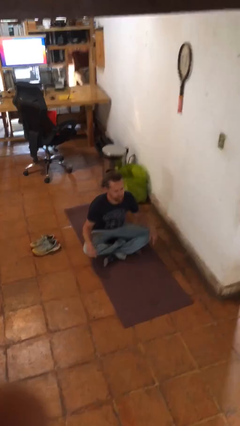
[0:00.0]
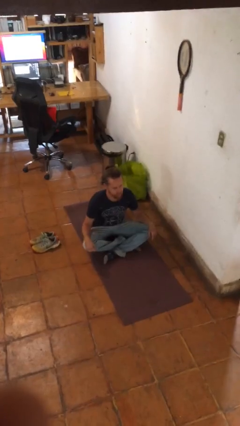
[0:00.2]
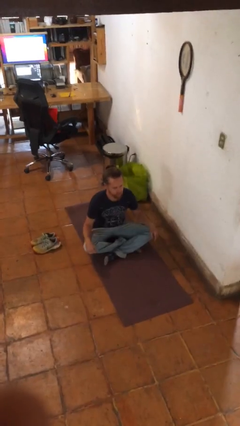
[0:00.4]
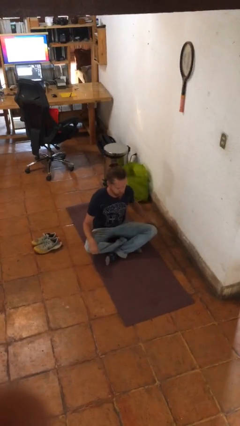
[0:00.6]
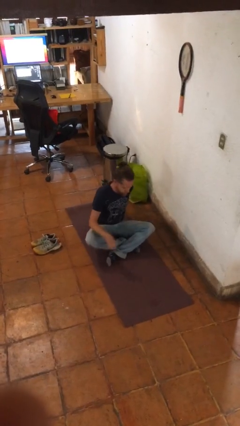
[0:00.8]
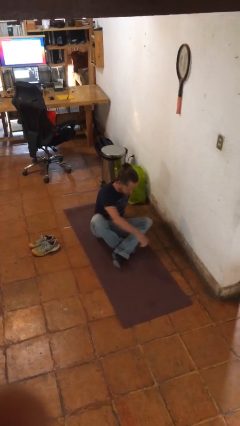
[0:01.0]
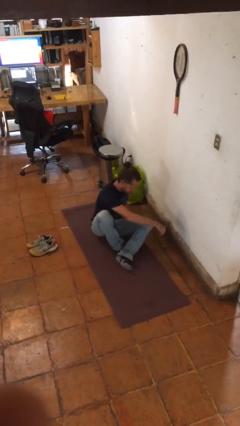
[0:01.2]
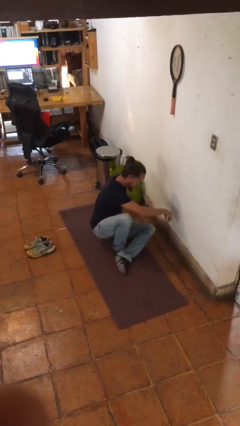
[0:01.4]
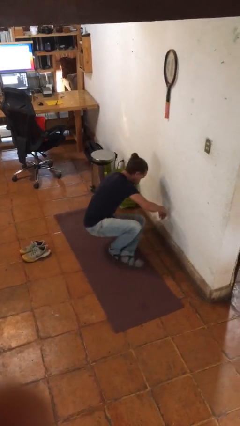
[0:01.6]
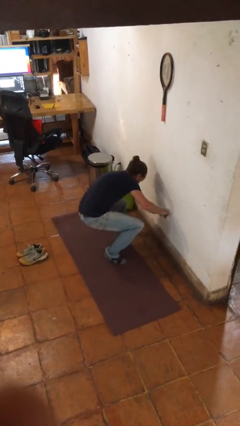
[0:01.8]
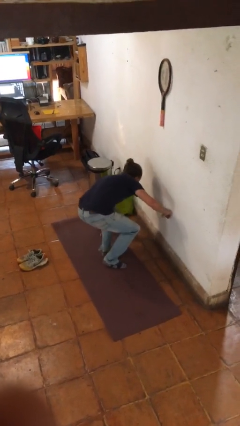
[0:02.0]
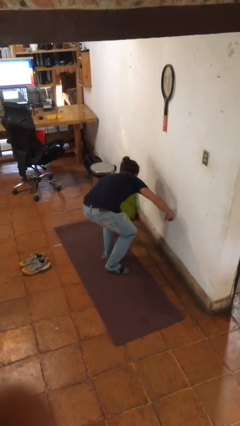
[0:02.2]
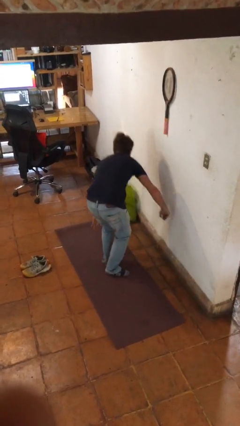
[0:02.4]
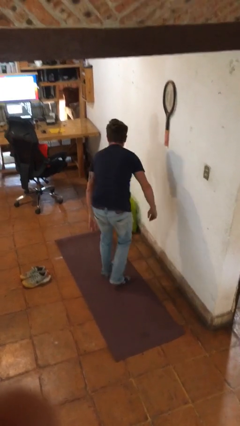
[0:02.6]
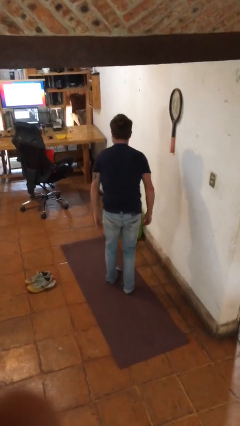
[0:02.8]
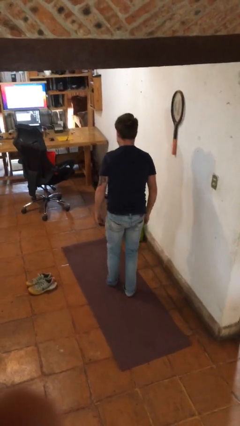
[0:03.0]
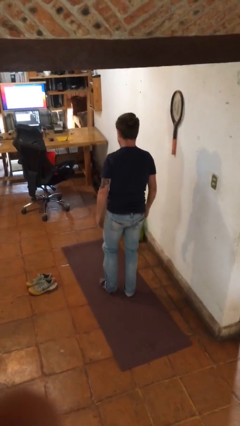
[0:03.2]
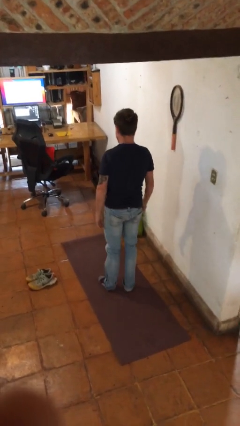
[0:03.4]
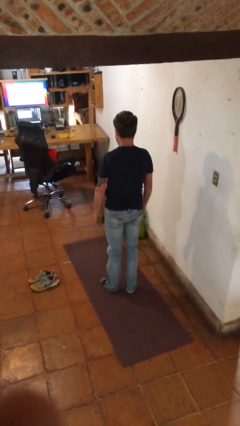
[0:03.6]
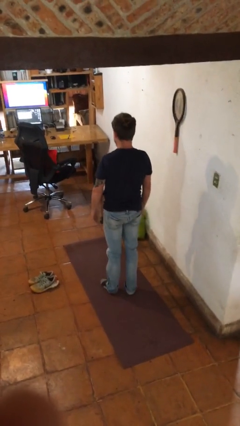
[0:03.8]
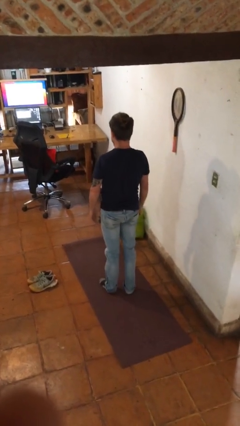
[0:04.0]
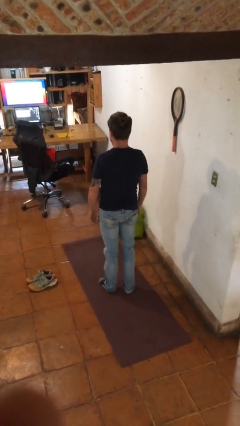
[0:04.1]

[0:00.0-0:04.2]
person stands up from floor

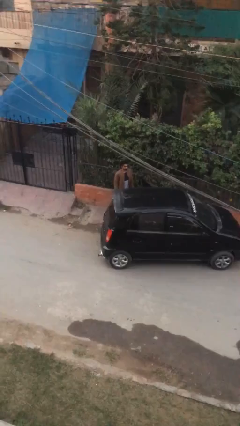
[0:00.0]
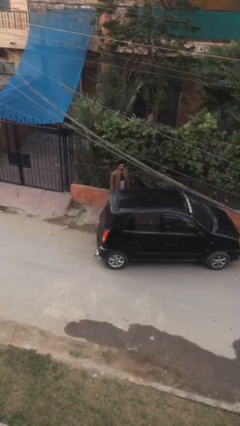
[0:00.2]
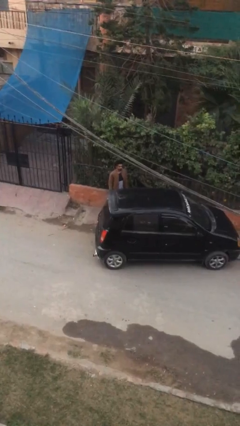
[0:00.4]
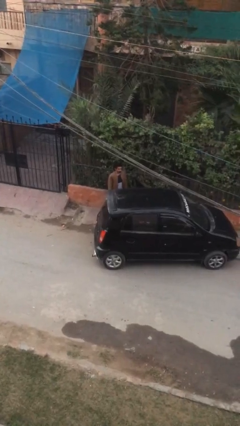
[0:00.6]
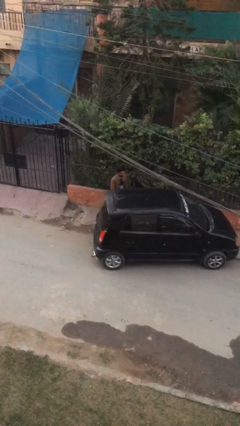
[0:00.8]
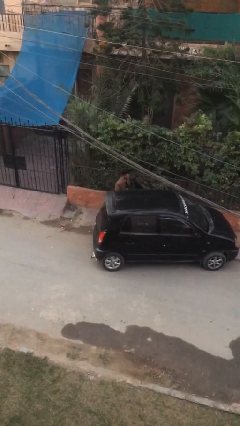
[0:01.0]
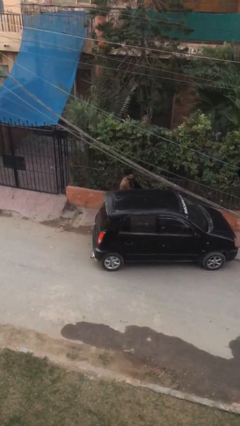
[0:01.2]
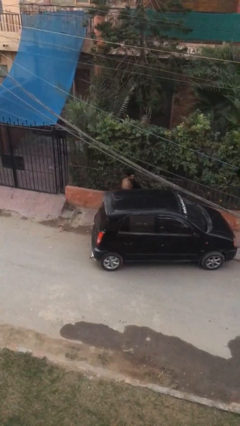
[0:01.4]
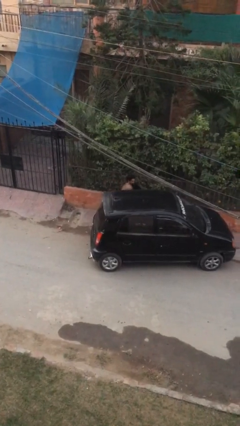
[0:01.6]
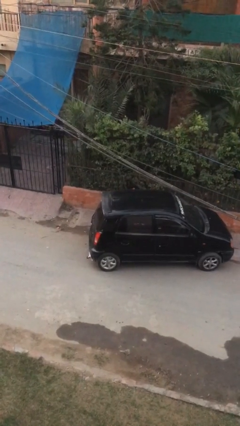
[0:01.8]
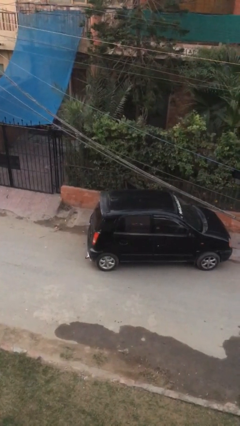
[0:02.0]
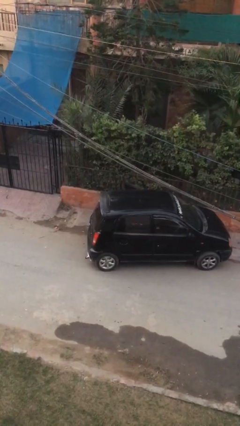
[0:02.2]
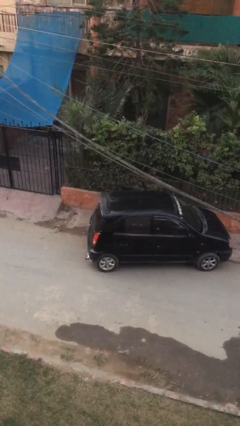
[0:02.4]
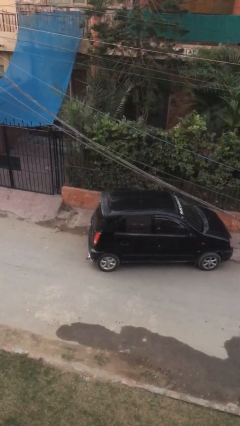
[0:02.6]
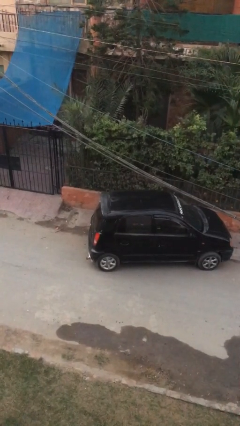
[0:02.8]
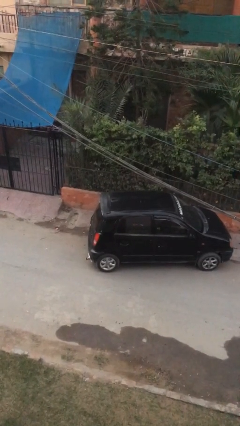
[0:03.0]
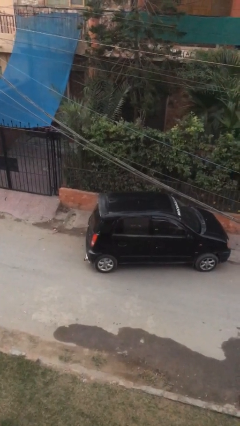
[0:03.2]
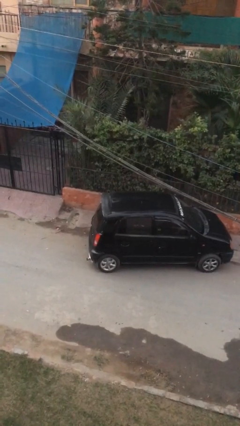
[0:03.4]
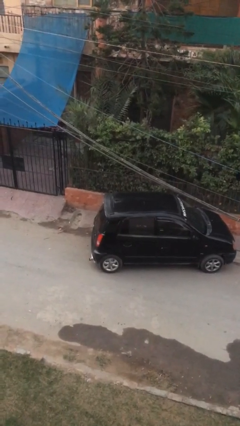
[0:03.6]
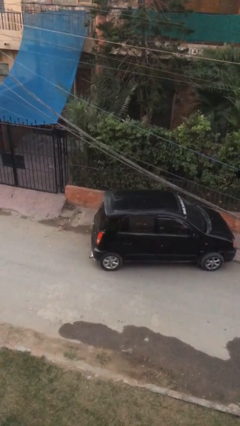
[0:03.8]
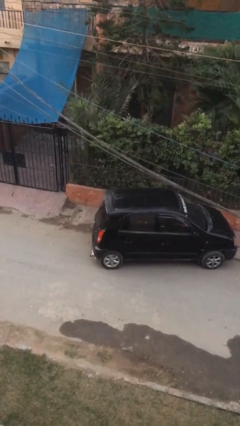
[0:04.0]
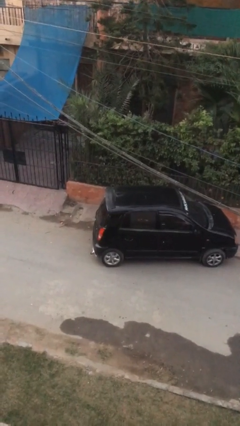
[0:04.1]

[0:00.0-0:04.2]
person enters car

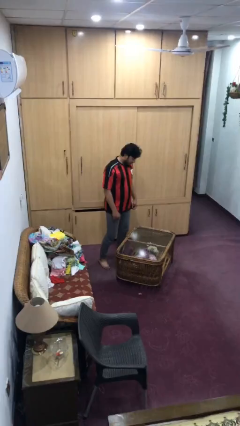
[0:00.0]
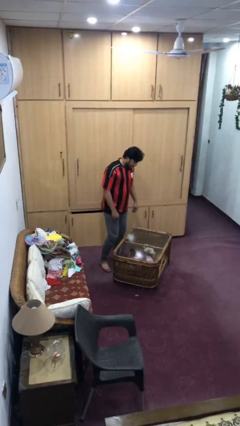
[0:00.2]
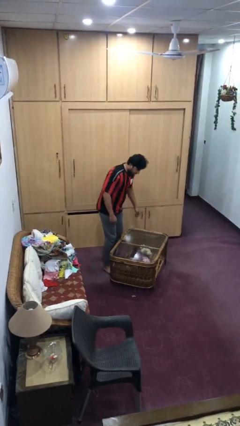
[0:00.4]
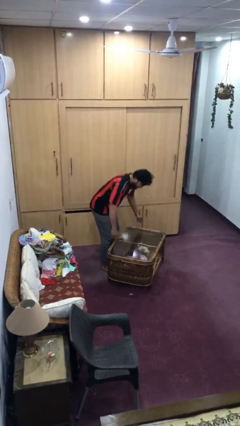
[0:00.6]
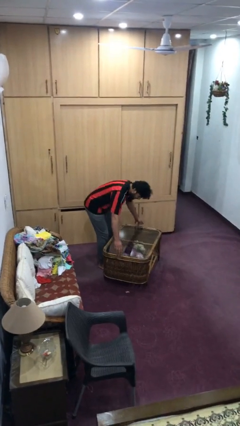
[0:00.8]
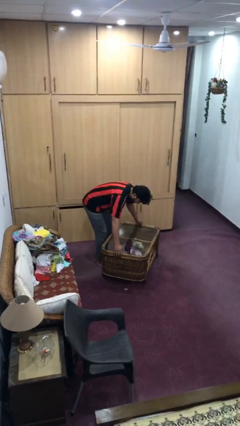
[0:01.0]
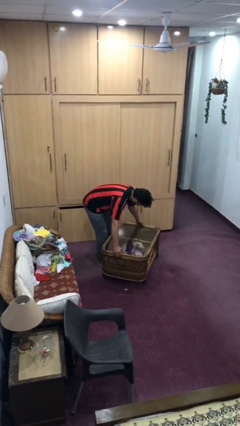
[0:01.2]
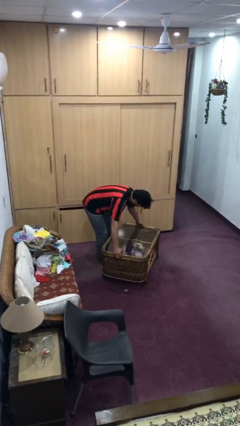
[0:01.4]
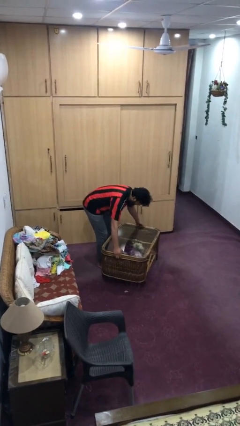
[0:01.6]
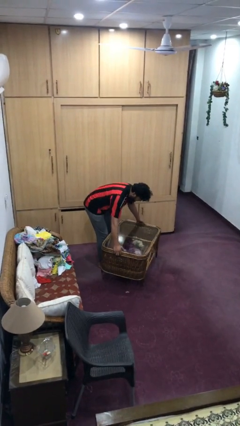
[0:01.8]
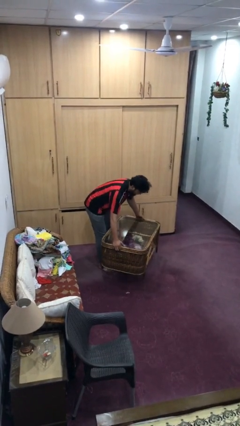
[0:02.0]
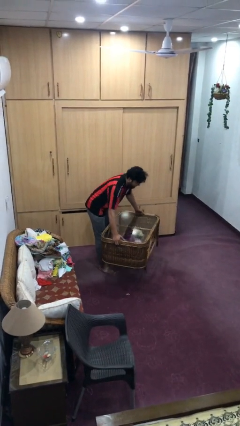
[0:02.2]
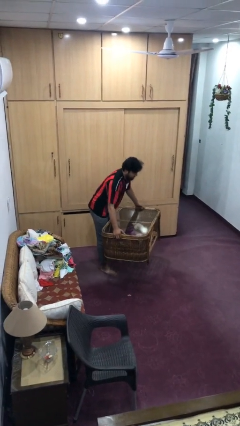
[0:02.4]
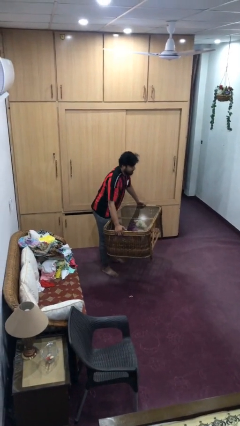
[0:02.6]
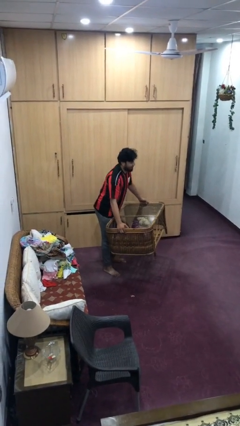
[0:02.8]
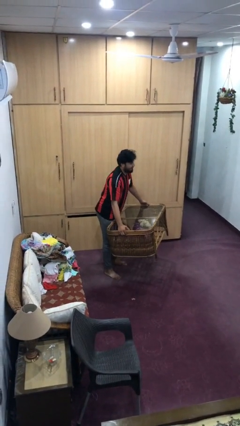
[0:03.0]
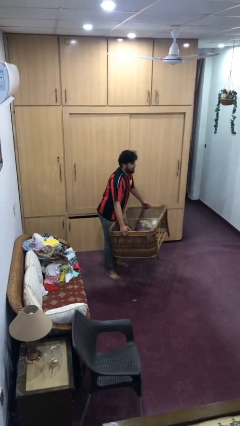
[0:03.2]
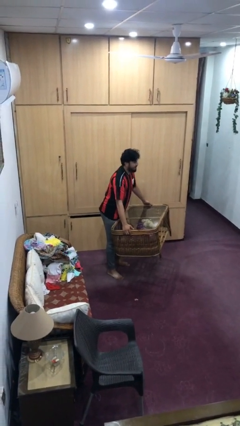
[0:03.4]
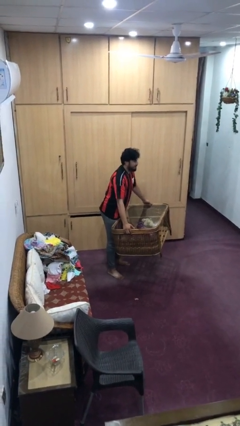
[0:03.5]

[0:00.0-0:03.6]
person picks up object from floor

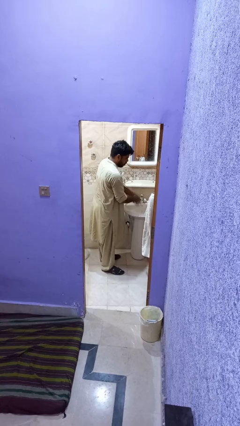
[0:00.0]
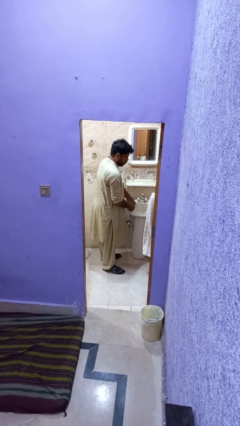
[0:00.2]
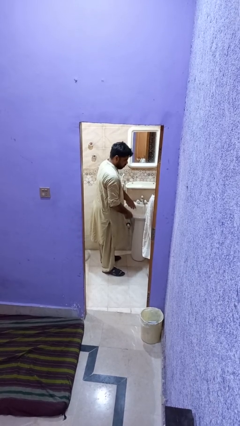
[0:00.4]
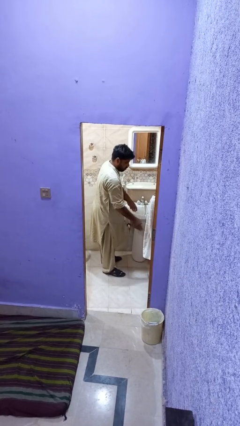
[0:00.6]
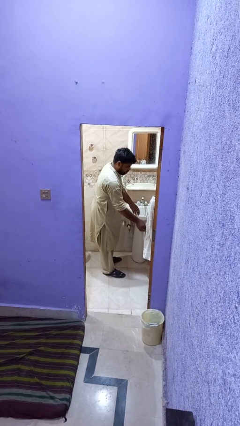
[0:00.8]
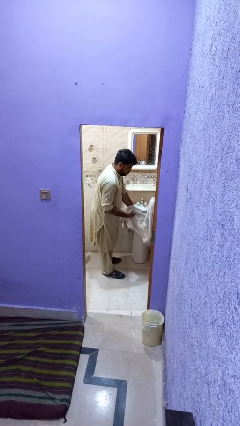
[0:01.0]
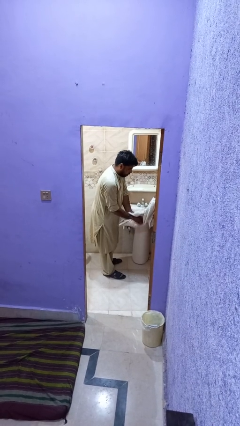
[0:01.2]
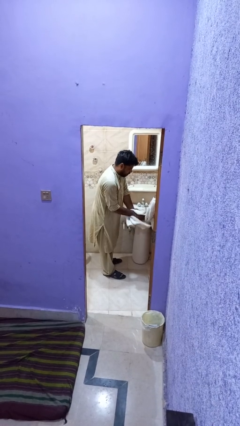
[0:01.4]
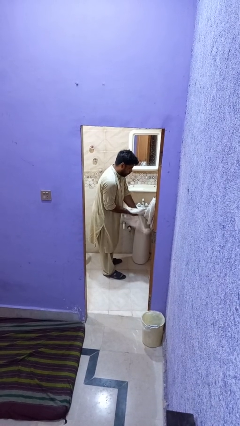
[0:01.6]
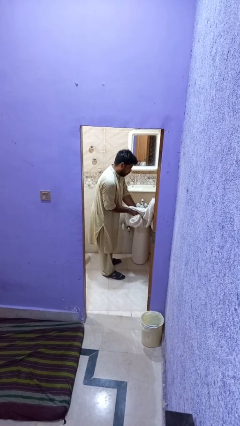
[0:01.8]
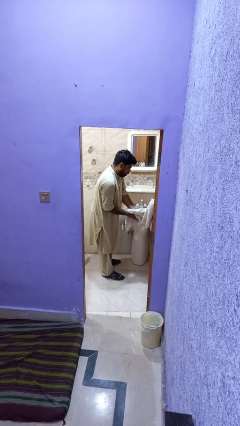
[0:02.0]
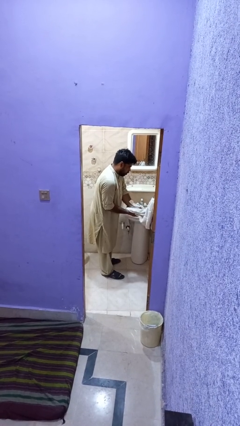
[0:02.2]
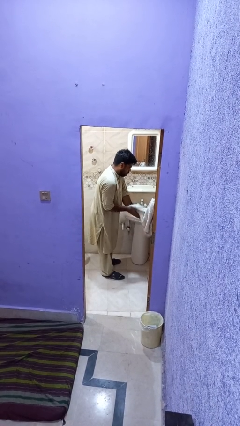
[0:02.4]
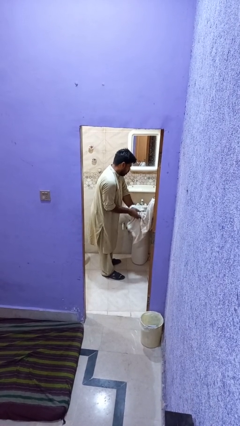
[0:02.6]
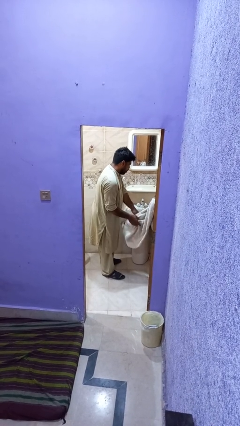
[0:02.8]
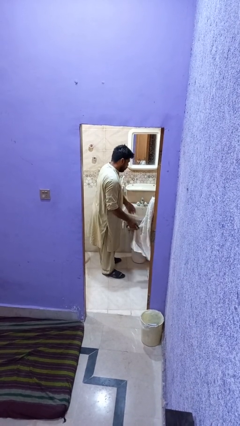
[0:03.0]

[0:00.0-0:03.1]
person dries hands with towel

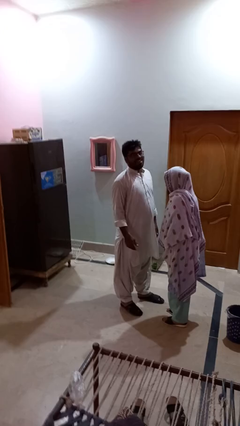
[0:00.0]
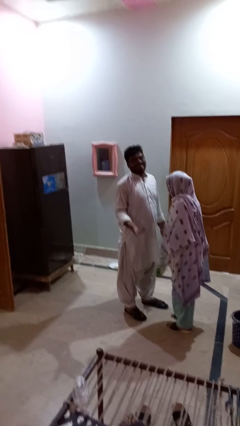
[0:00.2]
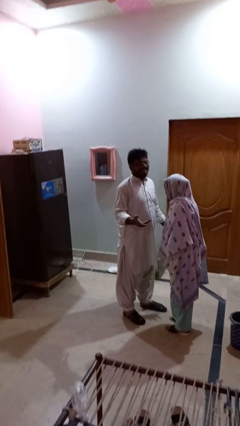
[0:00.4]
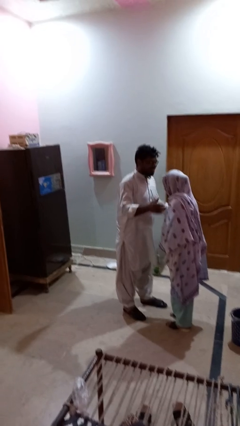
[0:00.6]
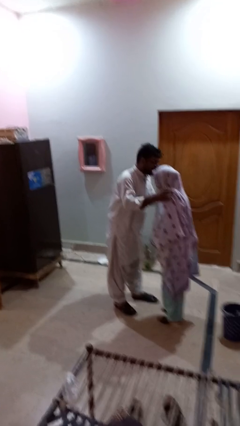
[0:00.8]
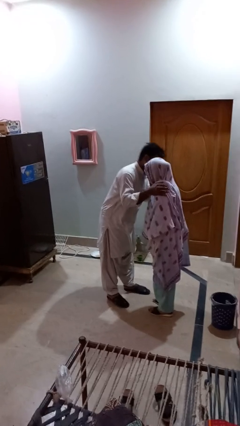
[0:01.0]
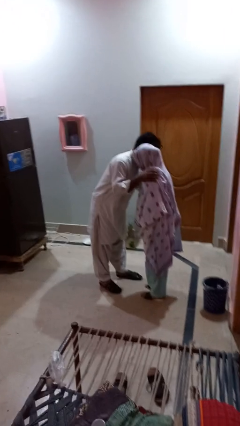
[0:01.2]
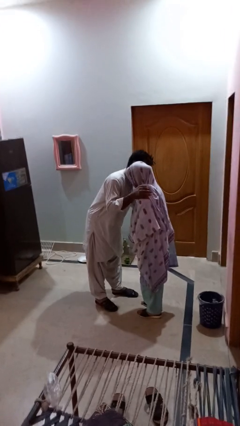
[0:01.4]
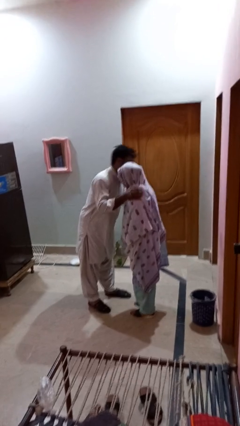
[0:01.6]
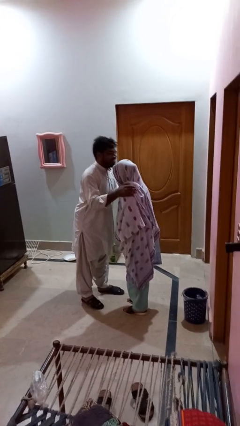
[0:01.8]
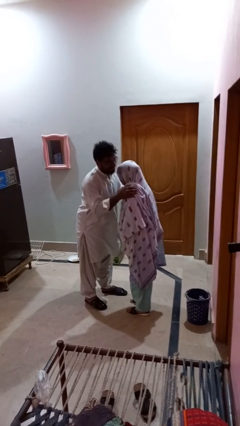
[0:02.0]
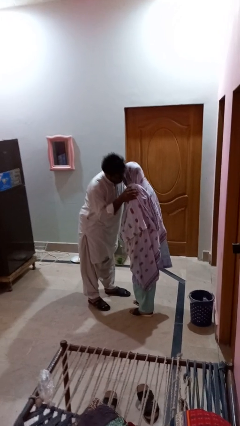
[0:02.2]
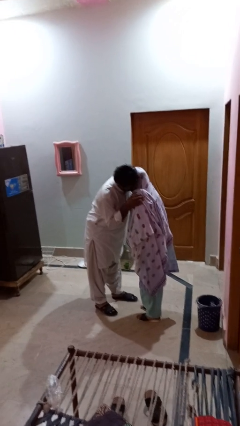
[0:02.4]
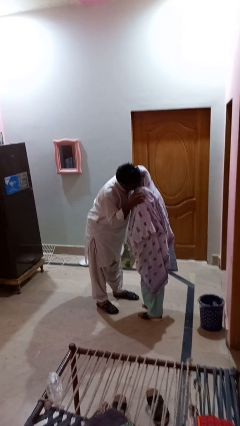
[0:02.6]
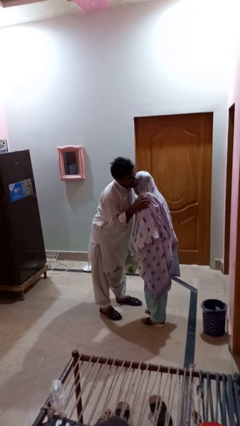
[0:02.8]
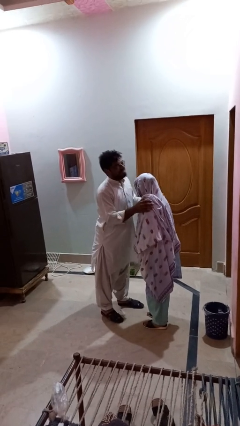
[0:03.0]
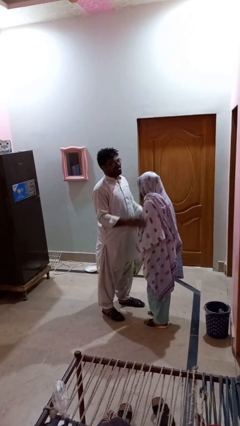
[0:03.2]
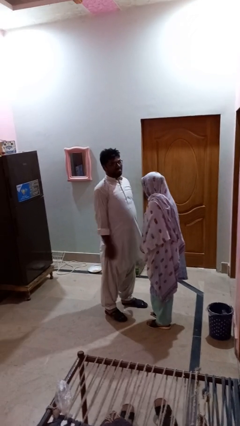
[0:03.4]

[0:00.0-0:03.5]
person kisses cheek of person
